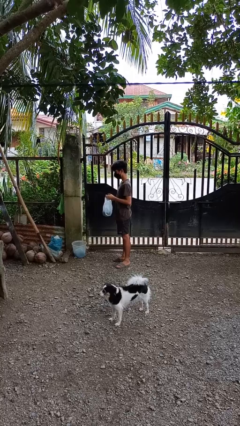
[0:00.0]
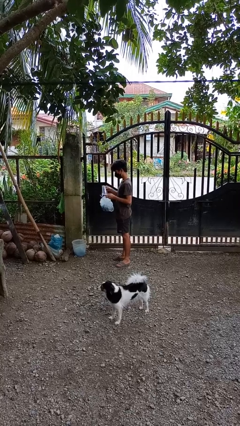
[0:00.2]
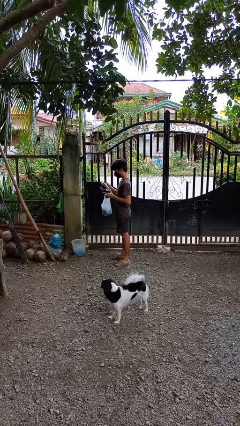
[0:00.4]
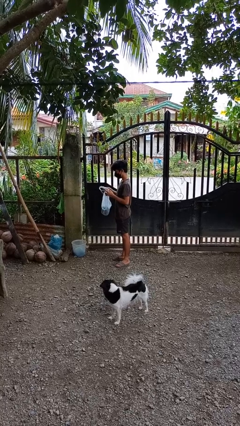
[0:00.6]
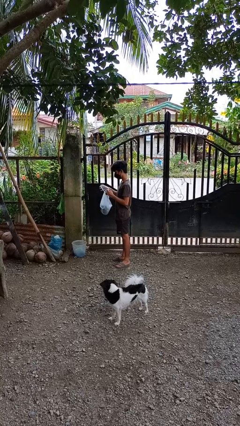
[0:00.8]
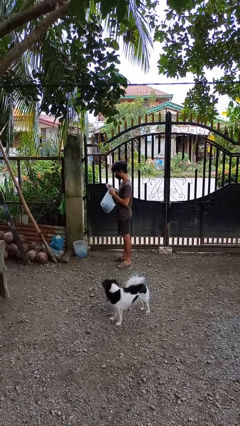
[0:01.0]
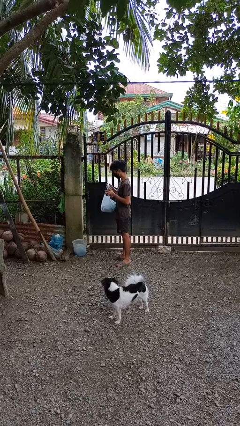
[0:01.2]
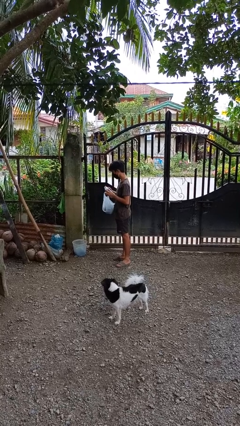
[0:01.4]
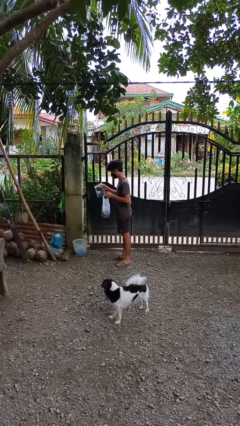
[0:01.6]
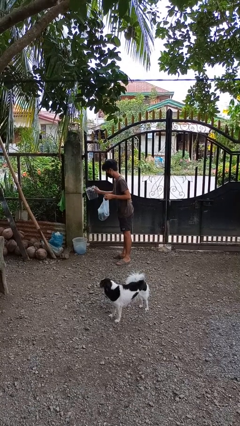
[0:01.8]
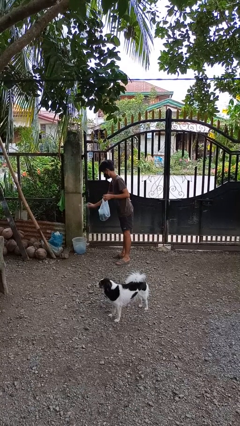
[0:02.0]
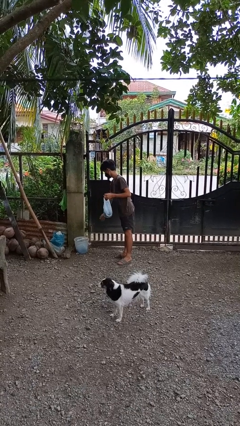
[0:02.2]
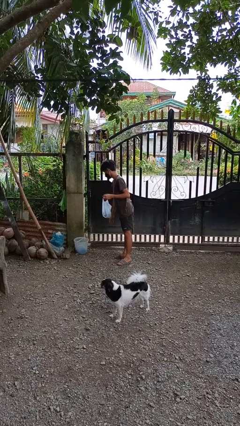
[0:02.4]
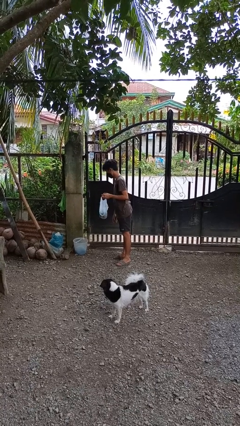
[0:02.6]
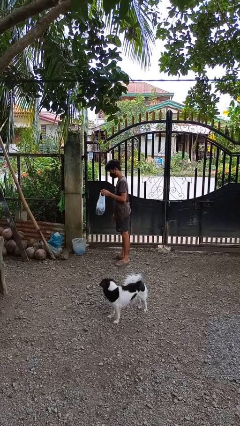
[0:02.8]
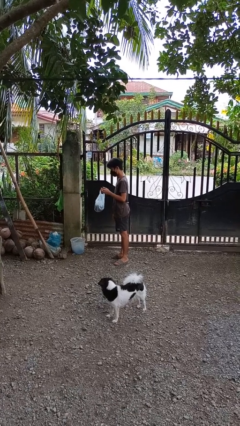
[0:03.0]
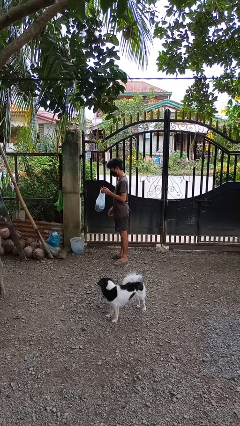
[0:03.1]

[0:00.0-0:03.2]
person discards trash

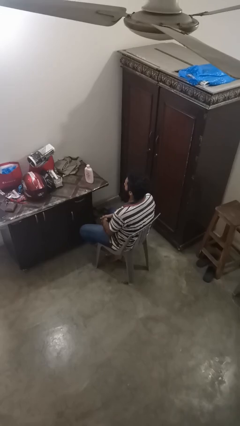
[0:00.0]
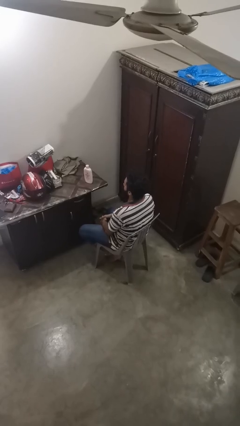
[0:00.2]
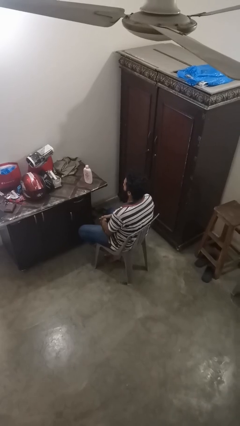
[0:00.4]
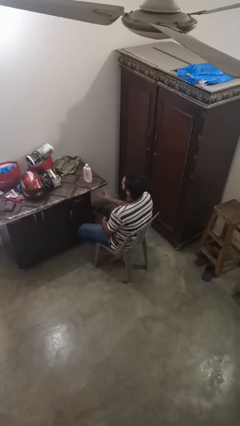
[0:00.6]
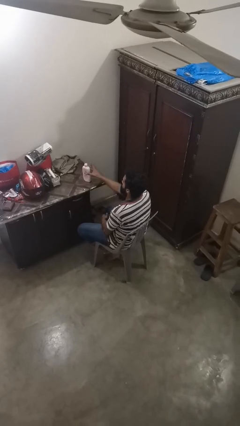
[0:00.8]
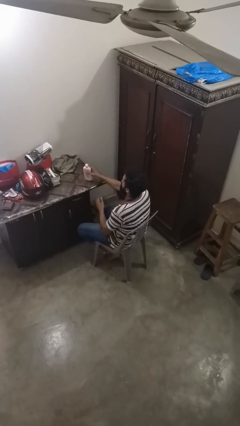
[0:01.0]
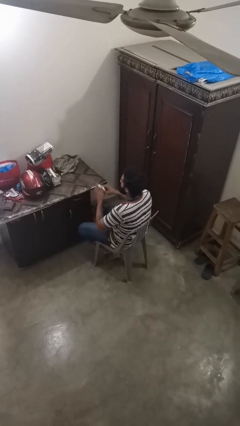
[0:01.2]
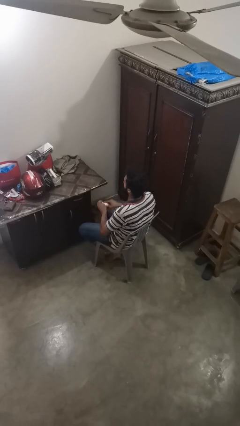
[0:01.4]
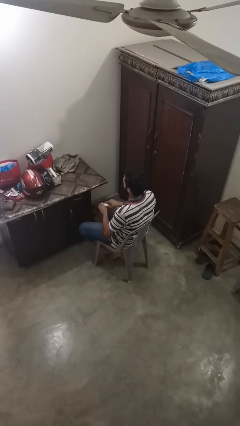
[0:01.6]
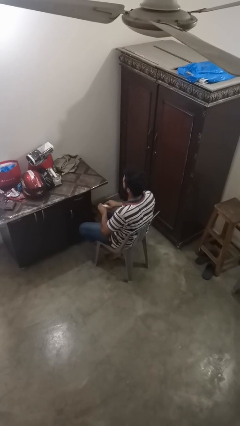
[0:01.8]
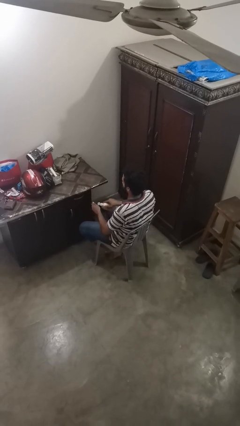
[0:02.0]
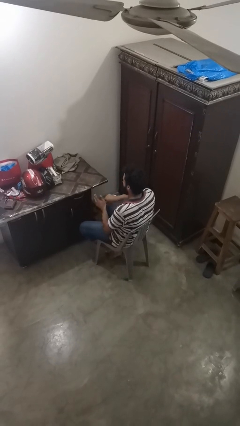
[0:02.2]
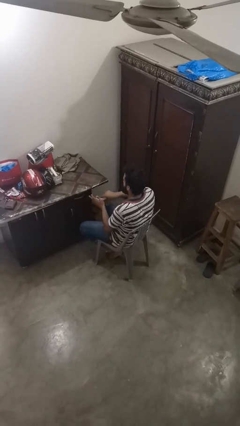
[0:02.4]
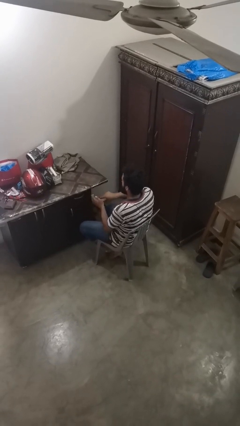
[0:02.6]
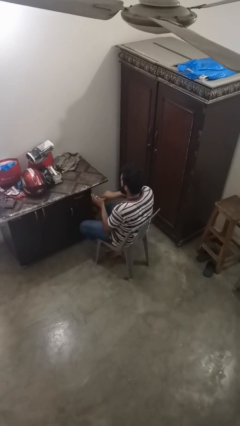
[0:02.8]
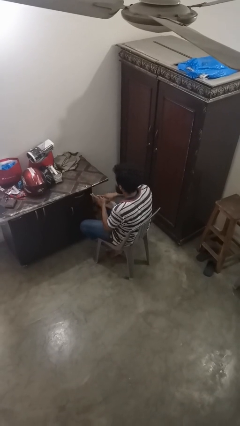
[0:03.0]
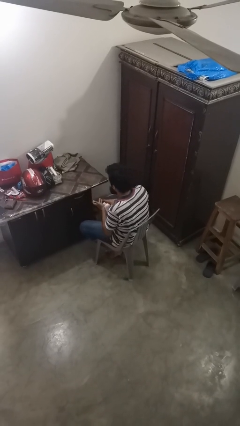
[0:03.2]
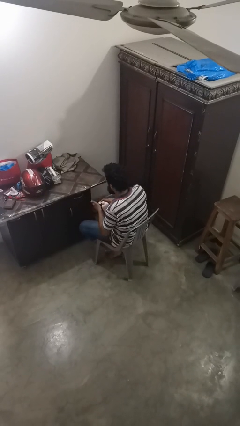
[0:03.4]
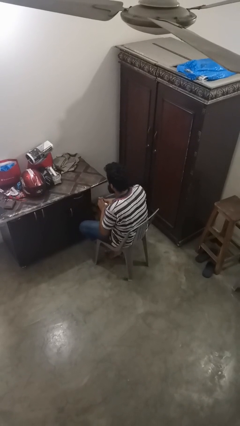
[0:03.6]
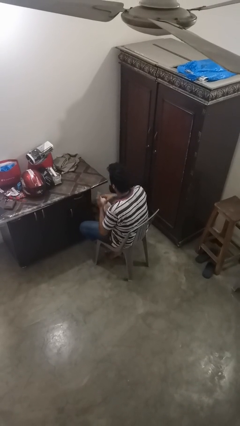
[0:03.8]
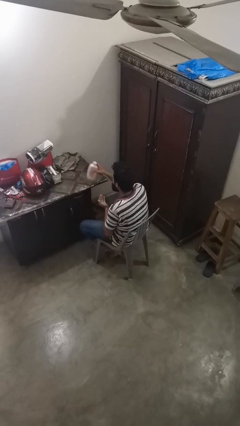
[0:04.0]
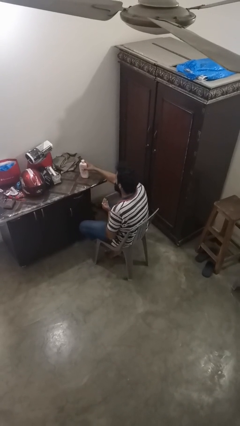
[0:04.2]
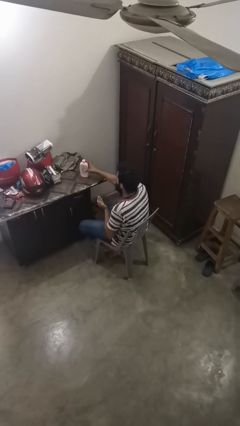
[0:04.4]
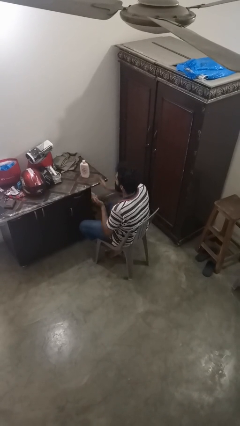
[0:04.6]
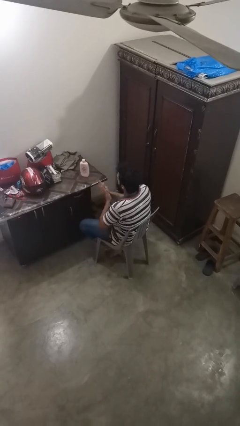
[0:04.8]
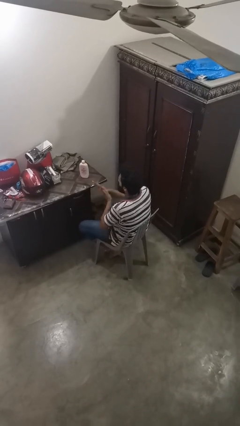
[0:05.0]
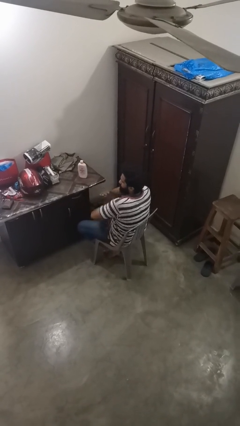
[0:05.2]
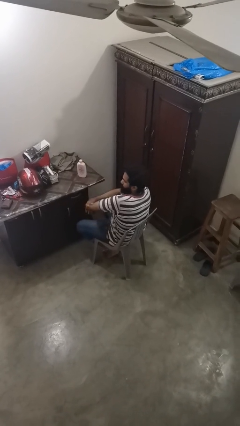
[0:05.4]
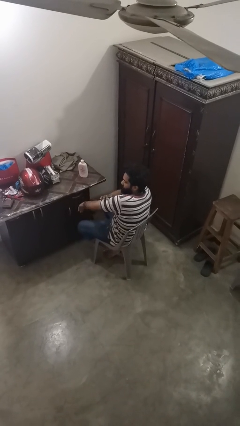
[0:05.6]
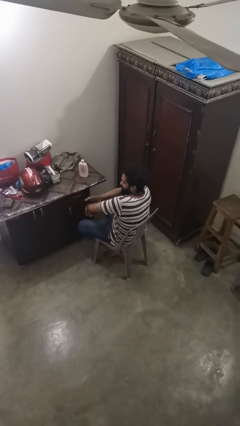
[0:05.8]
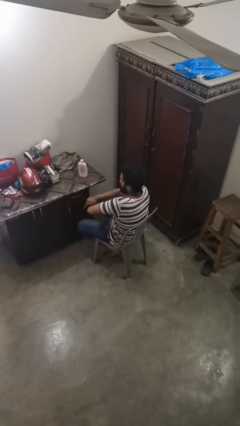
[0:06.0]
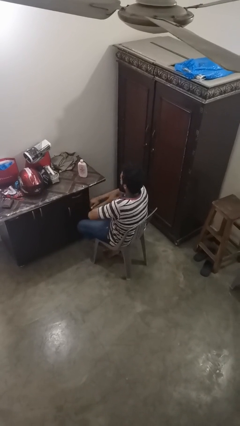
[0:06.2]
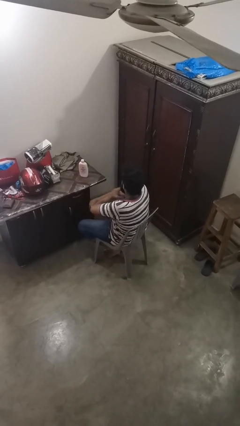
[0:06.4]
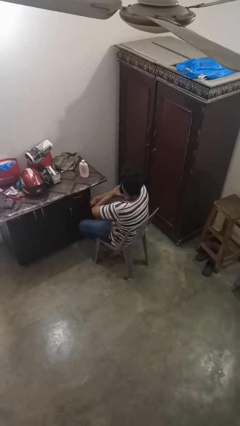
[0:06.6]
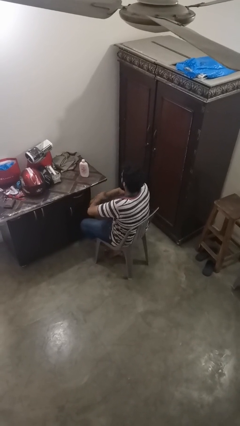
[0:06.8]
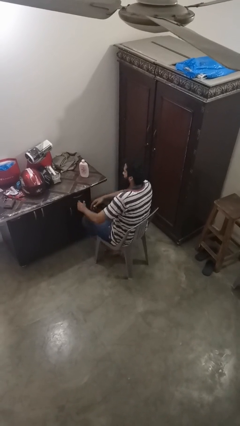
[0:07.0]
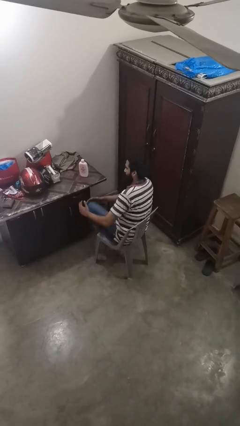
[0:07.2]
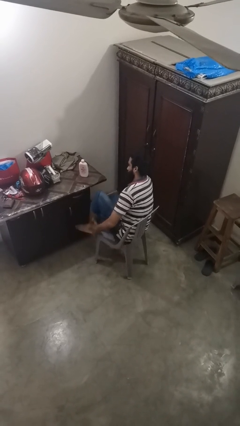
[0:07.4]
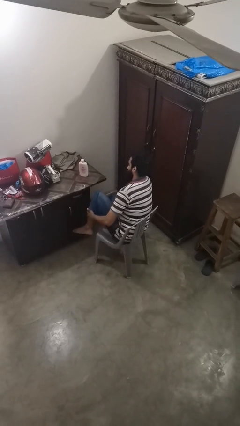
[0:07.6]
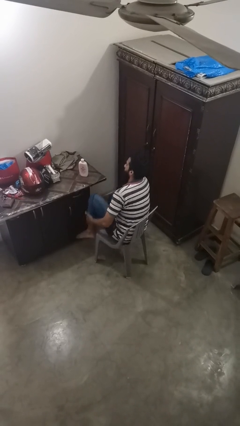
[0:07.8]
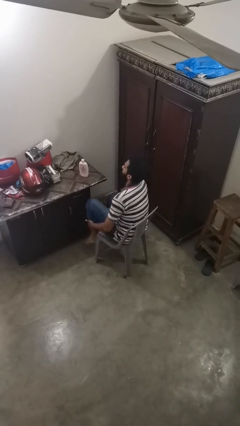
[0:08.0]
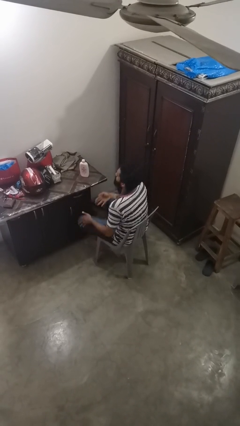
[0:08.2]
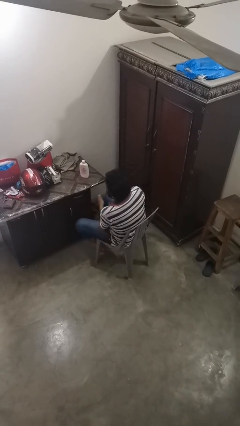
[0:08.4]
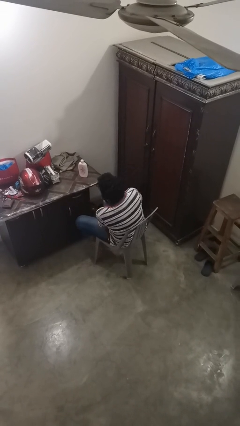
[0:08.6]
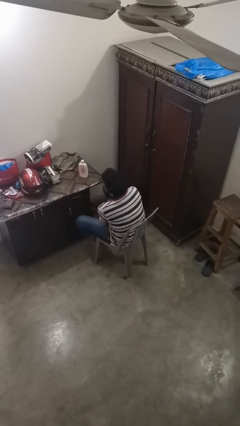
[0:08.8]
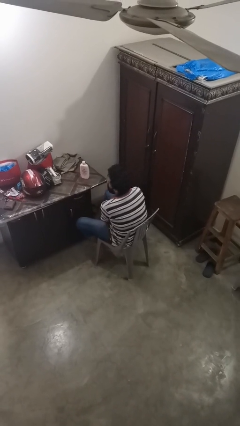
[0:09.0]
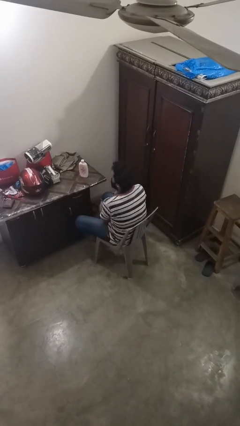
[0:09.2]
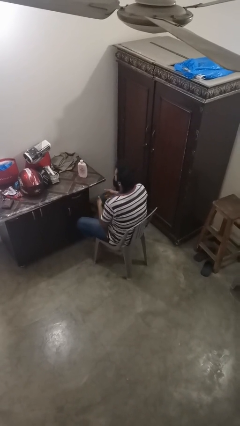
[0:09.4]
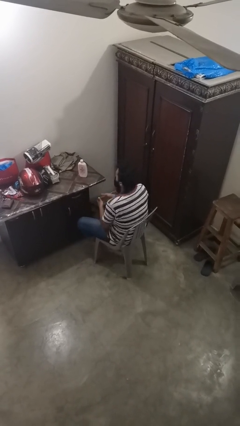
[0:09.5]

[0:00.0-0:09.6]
person applies sunscreen

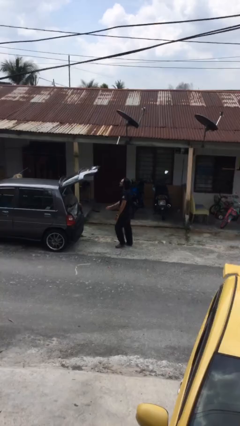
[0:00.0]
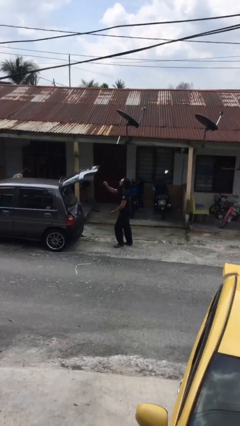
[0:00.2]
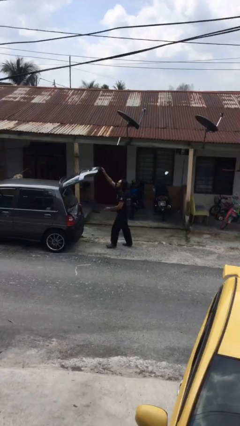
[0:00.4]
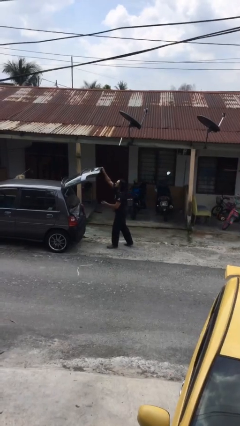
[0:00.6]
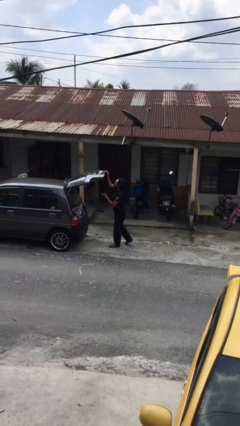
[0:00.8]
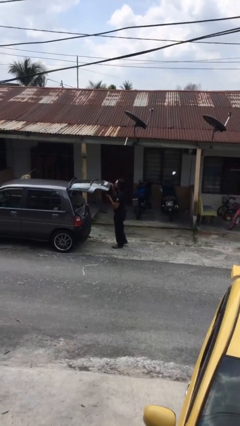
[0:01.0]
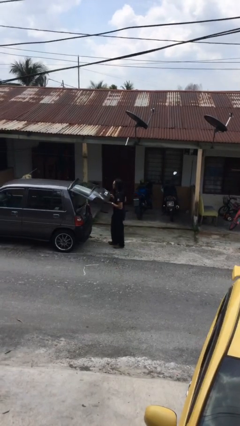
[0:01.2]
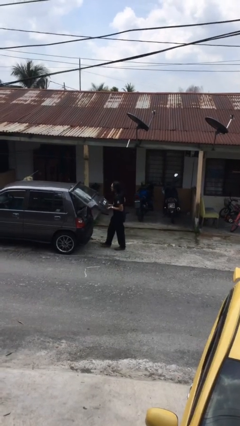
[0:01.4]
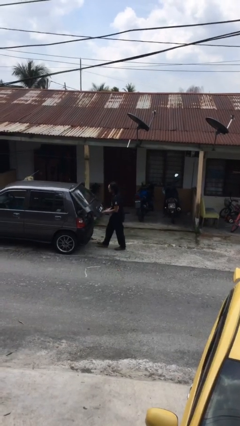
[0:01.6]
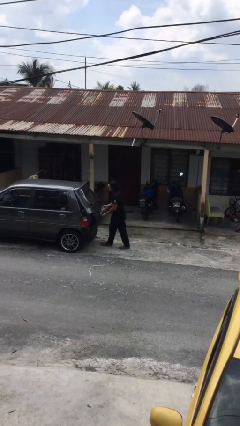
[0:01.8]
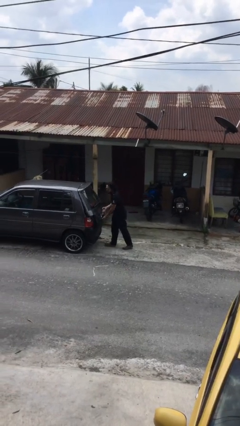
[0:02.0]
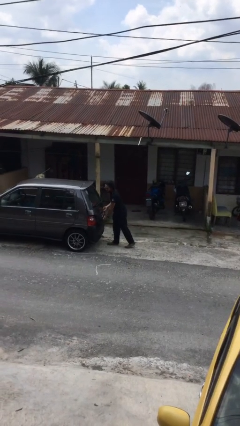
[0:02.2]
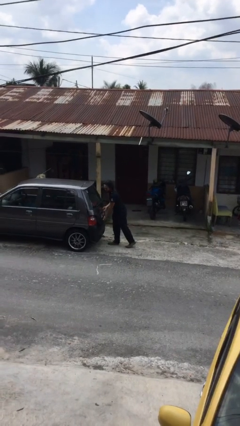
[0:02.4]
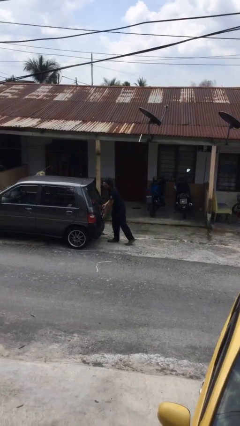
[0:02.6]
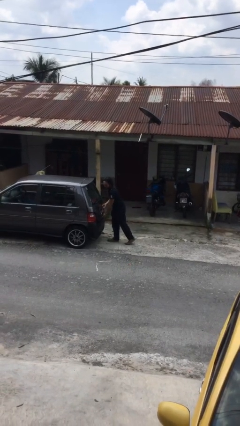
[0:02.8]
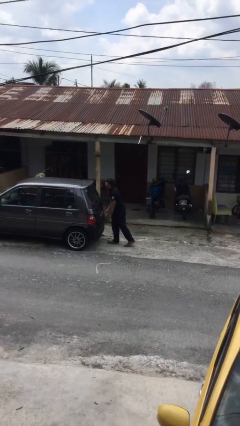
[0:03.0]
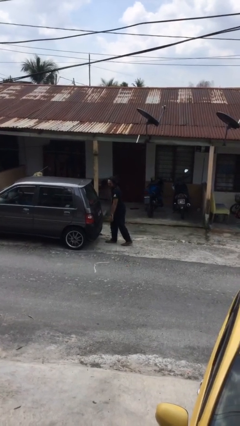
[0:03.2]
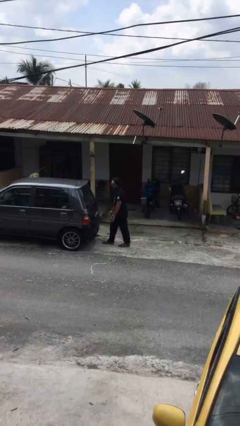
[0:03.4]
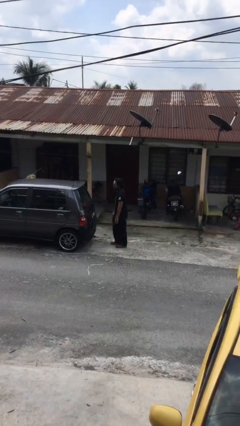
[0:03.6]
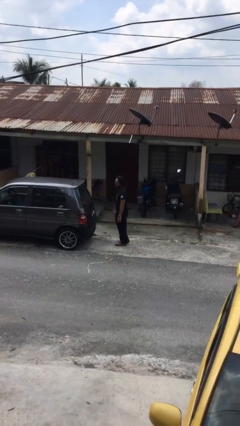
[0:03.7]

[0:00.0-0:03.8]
person closes car trunk

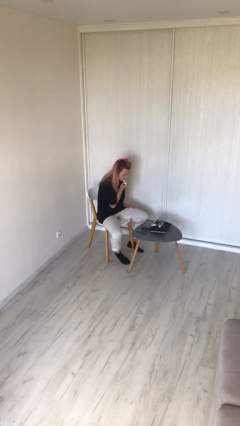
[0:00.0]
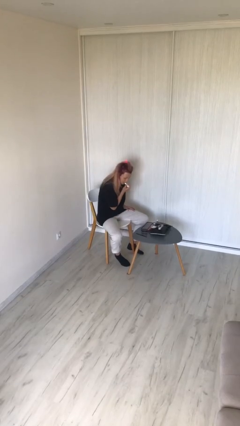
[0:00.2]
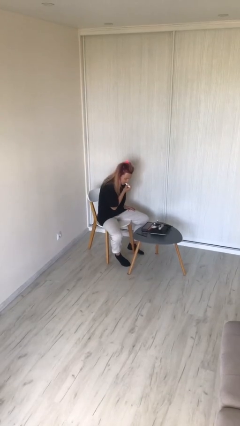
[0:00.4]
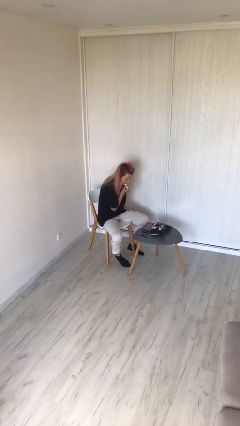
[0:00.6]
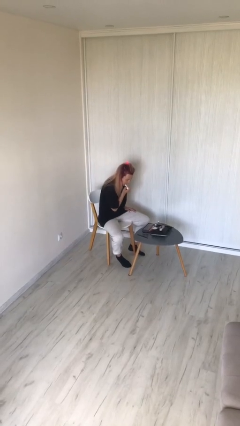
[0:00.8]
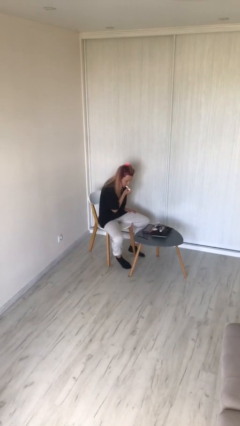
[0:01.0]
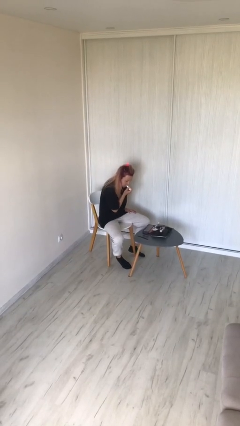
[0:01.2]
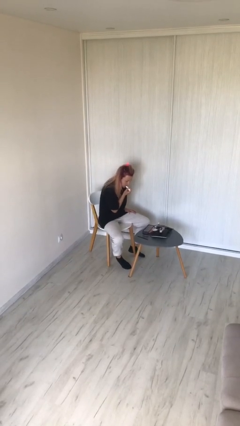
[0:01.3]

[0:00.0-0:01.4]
person applies lip makeup
